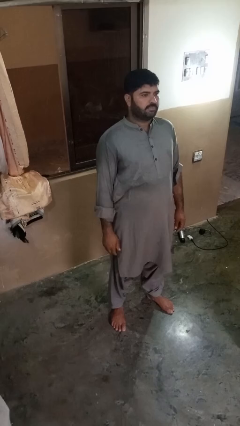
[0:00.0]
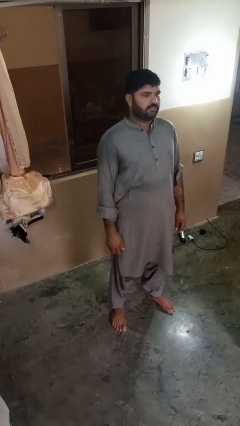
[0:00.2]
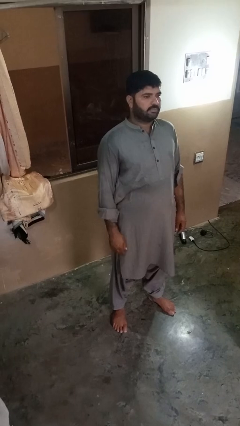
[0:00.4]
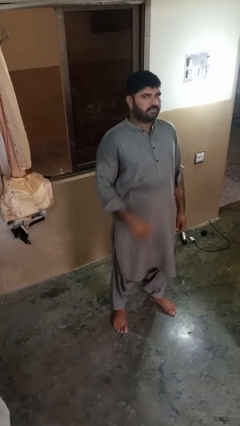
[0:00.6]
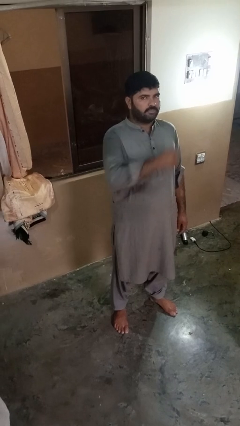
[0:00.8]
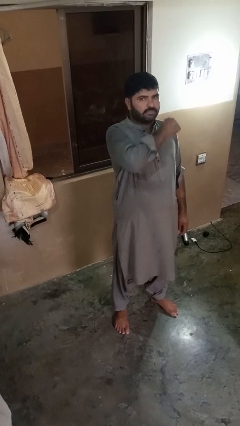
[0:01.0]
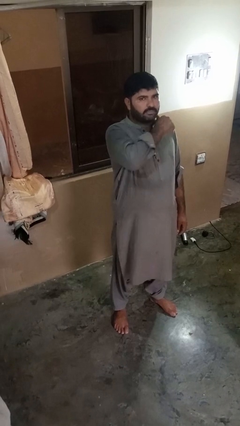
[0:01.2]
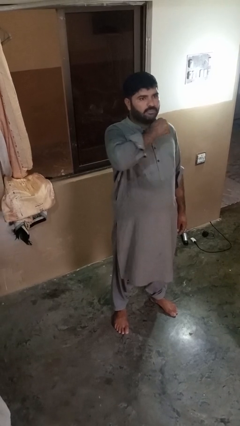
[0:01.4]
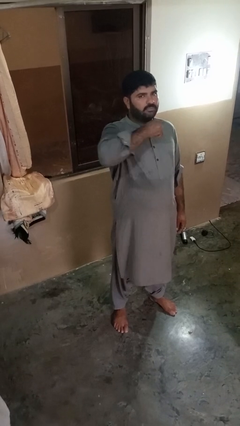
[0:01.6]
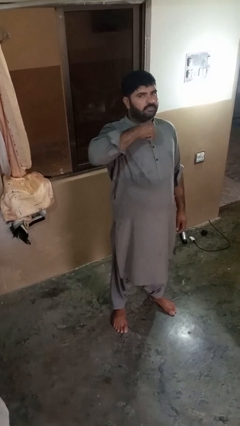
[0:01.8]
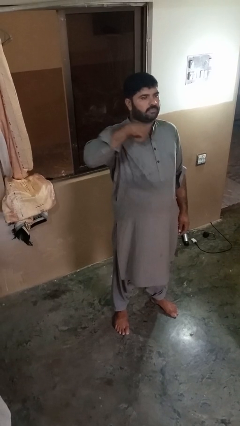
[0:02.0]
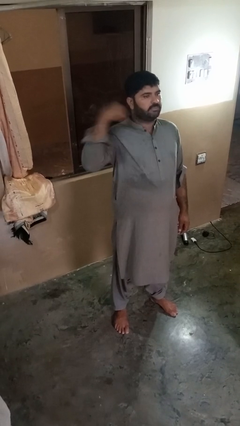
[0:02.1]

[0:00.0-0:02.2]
person gestures cut

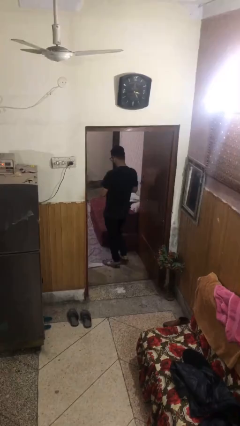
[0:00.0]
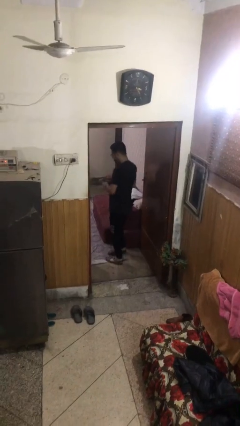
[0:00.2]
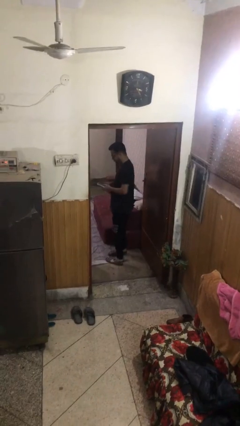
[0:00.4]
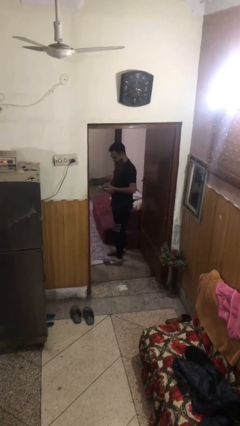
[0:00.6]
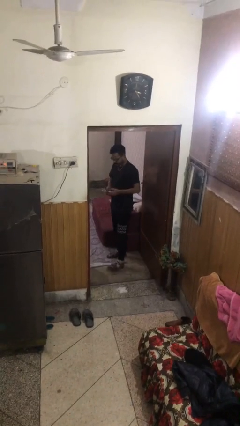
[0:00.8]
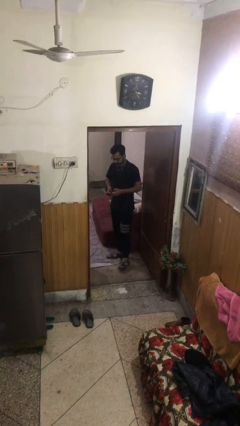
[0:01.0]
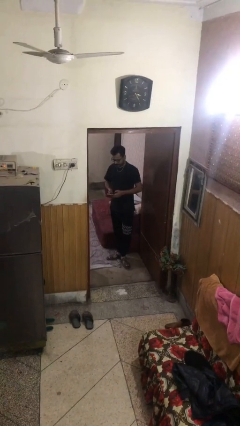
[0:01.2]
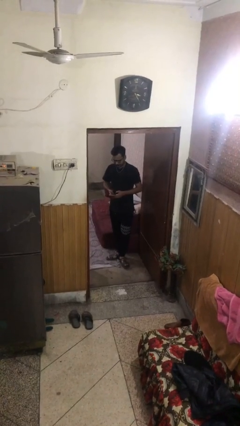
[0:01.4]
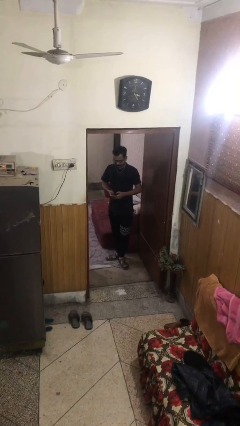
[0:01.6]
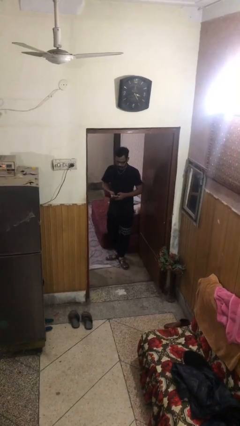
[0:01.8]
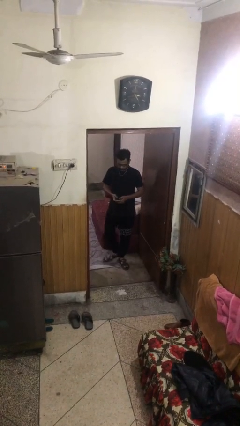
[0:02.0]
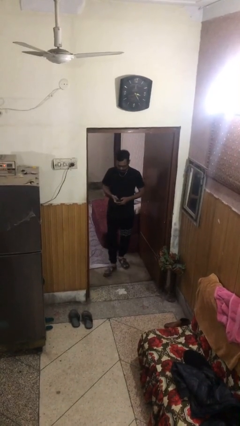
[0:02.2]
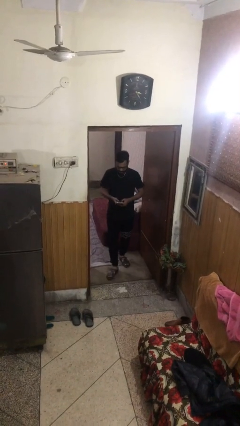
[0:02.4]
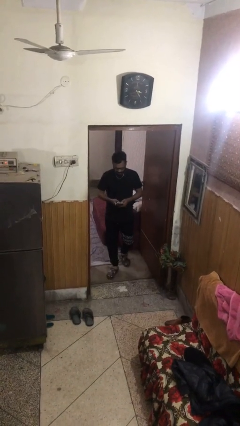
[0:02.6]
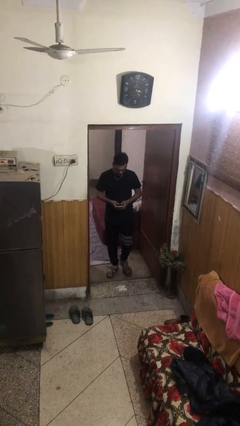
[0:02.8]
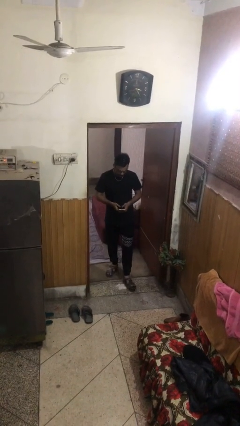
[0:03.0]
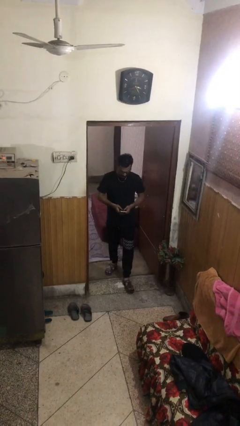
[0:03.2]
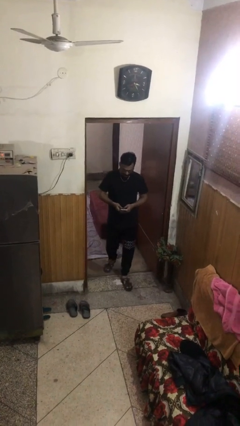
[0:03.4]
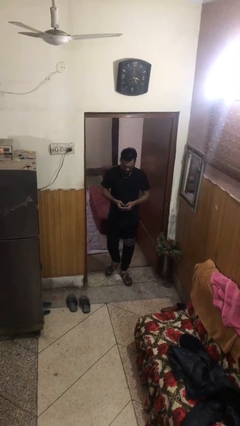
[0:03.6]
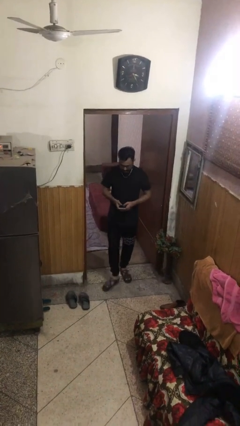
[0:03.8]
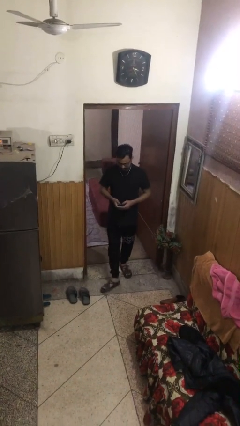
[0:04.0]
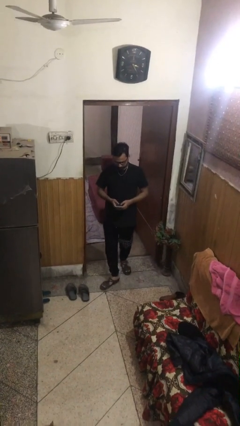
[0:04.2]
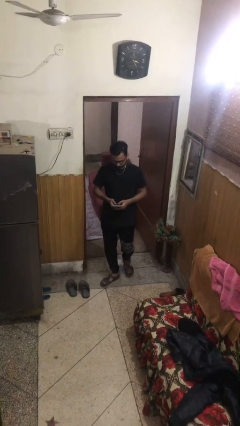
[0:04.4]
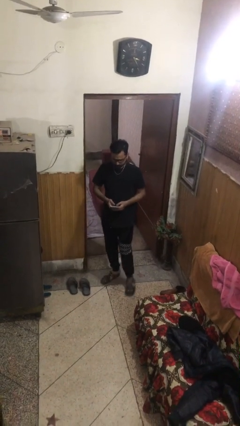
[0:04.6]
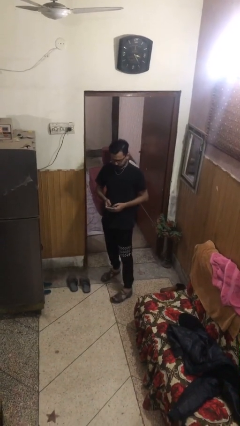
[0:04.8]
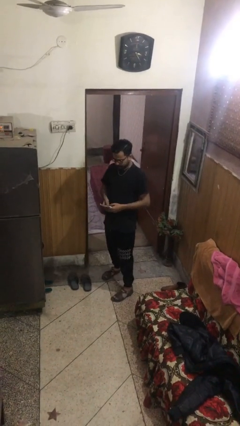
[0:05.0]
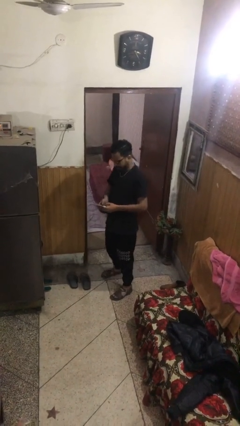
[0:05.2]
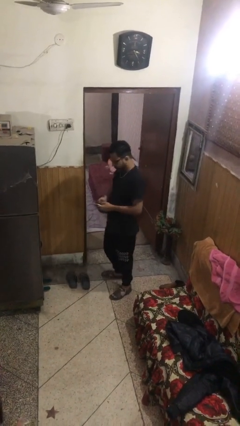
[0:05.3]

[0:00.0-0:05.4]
person enters scene through structure

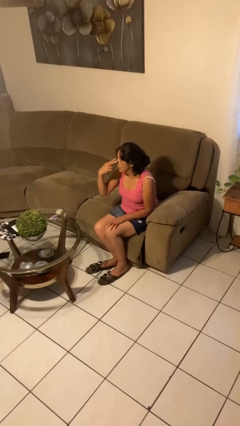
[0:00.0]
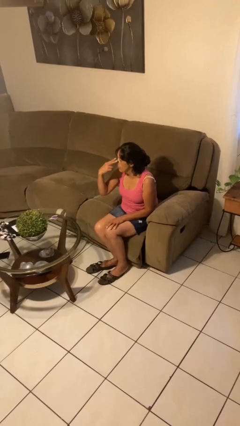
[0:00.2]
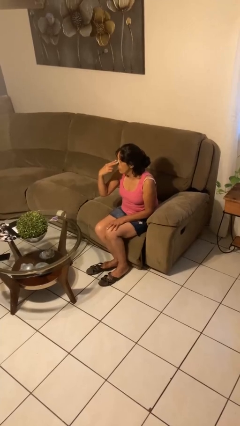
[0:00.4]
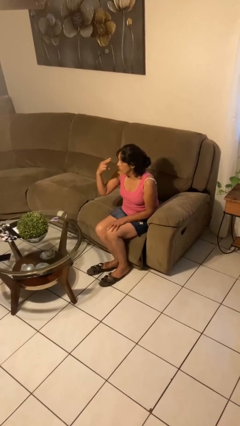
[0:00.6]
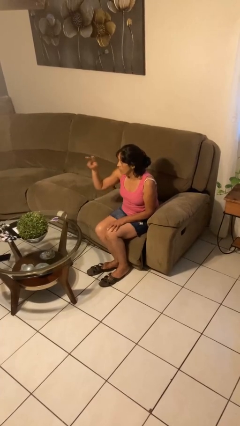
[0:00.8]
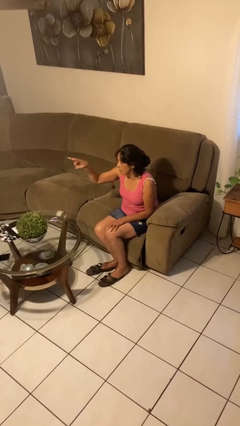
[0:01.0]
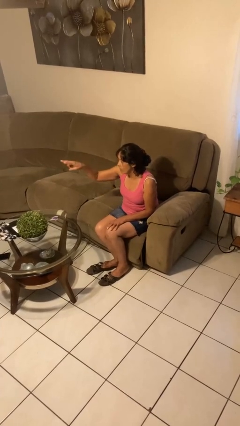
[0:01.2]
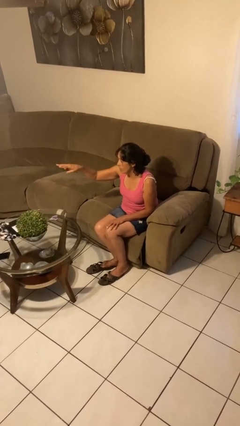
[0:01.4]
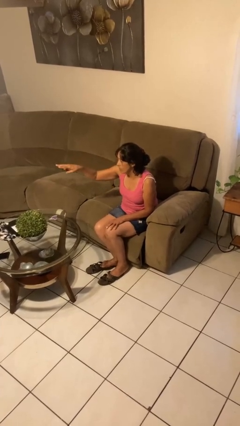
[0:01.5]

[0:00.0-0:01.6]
person gestures watch closely

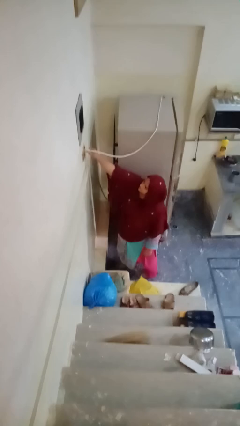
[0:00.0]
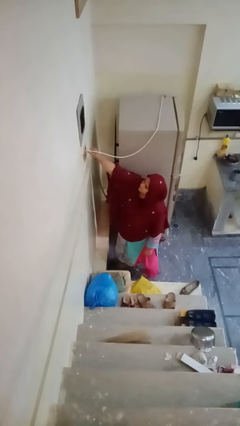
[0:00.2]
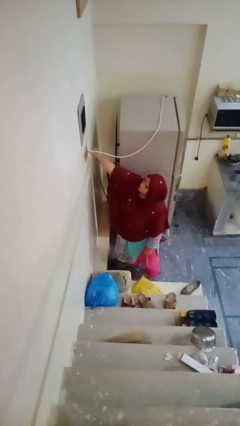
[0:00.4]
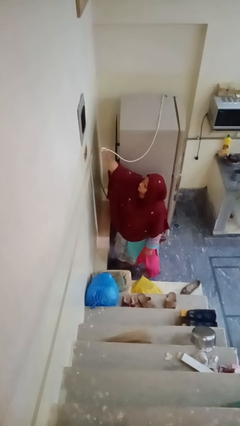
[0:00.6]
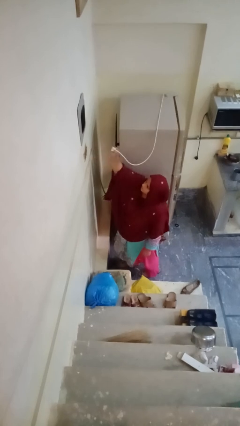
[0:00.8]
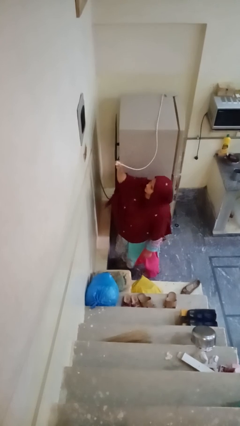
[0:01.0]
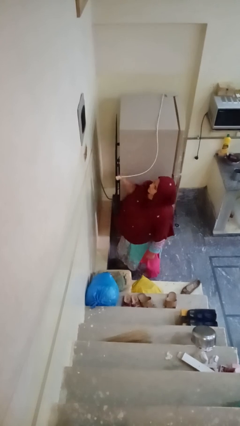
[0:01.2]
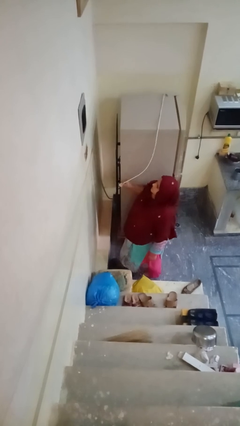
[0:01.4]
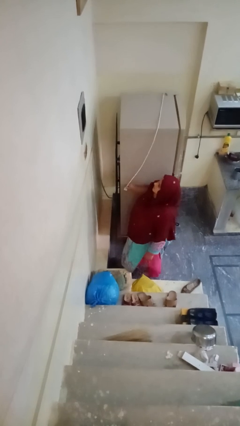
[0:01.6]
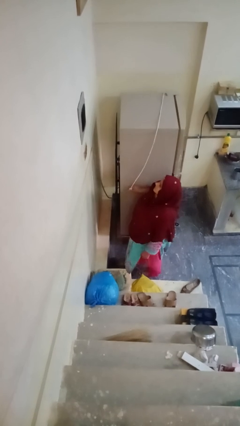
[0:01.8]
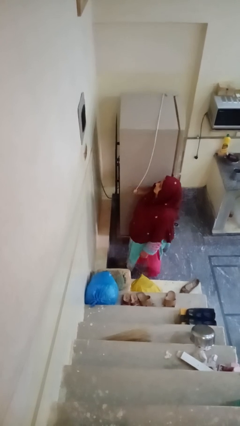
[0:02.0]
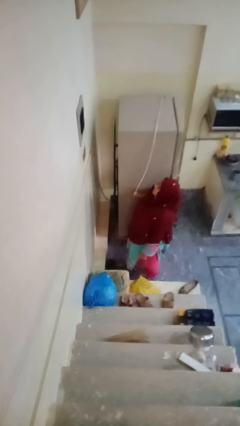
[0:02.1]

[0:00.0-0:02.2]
person unplugs from electrical socket

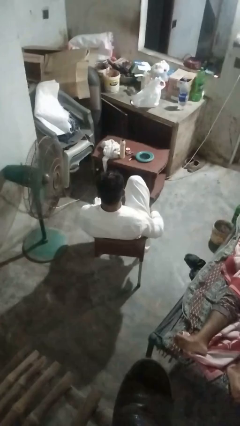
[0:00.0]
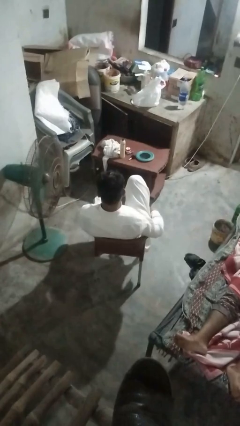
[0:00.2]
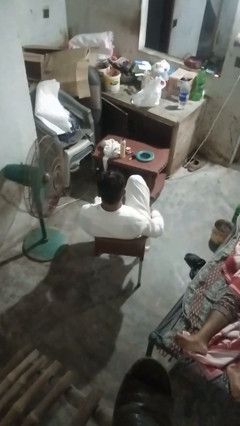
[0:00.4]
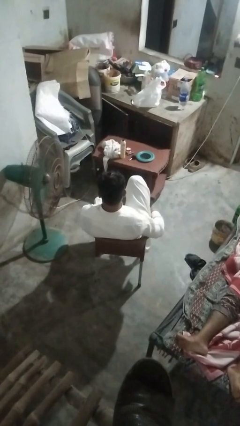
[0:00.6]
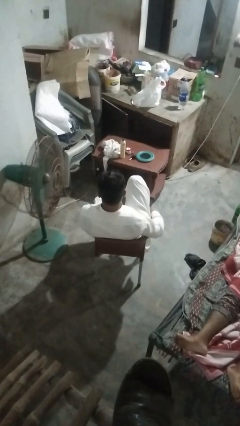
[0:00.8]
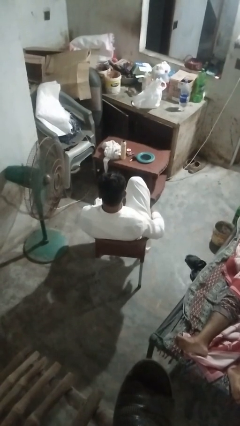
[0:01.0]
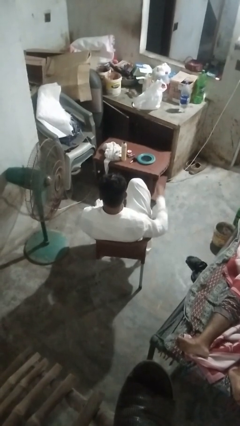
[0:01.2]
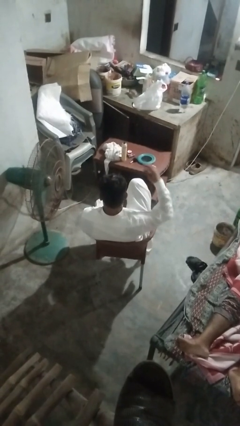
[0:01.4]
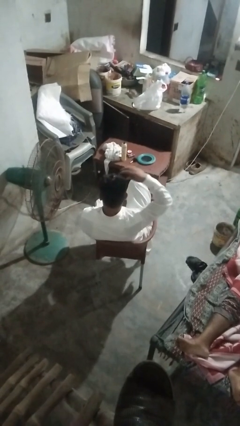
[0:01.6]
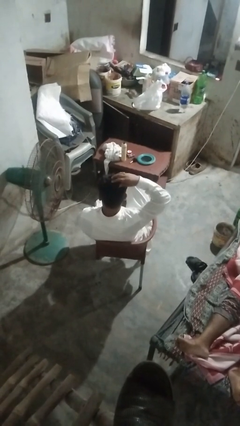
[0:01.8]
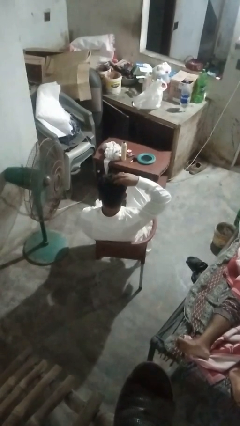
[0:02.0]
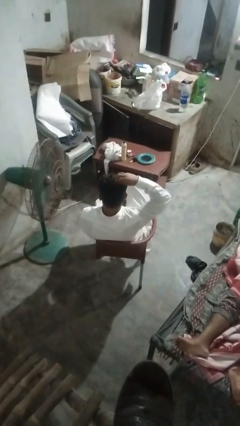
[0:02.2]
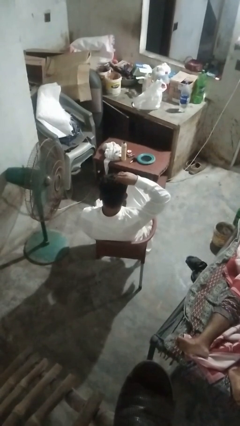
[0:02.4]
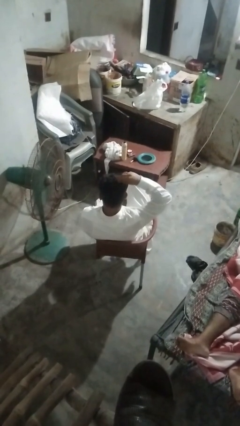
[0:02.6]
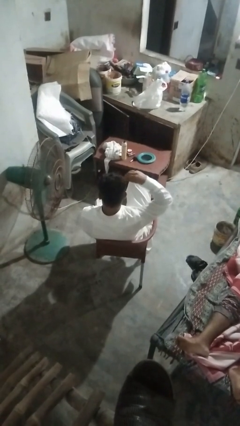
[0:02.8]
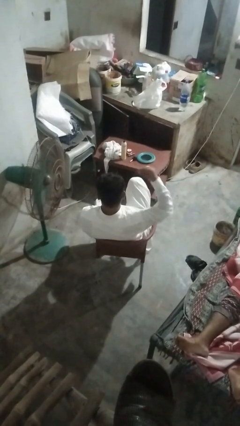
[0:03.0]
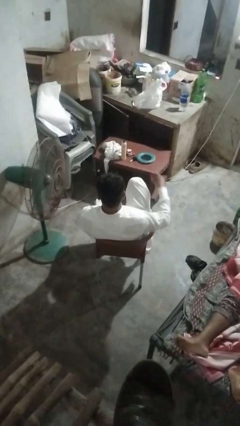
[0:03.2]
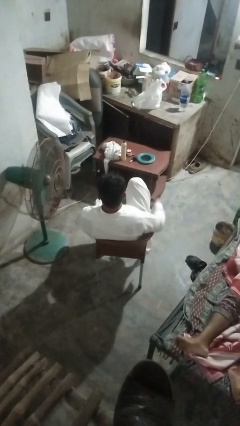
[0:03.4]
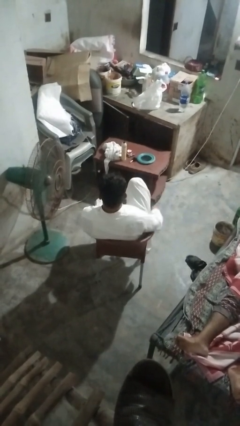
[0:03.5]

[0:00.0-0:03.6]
person takes off hairtie

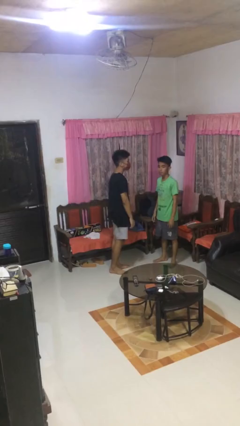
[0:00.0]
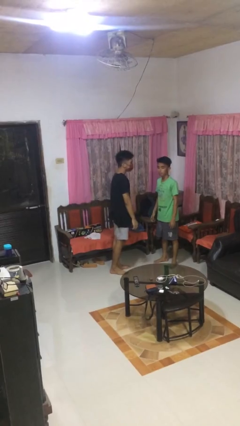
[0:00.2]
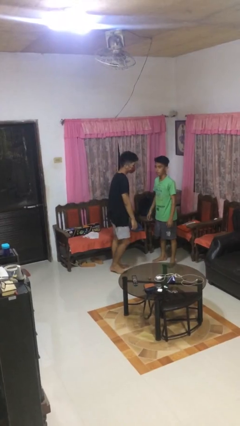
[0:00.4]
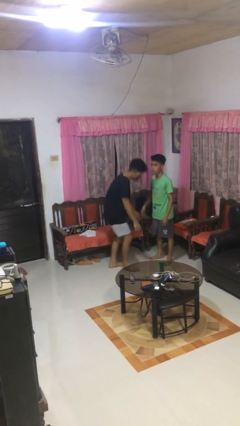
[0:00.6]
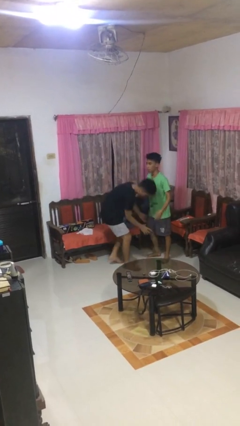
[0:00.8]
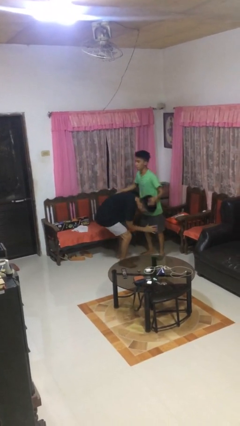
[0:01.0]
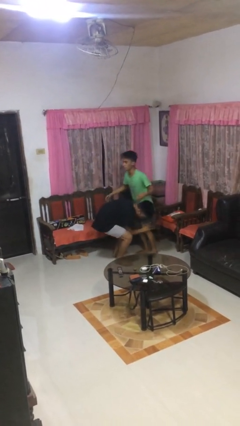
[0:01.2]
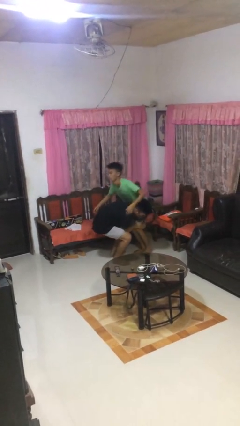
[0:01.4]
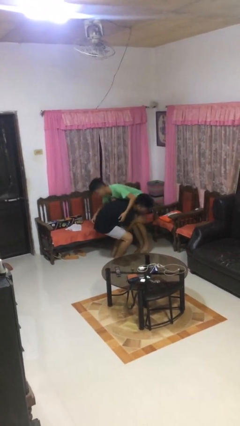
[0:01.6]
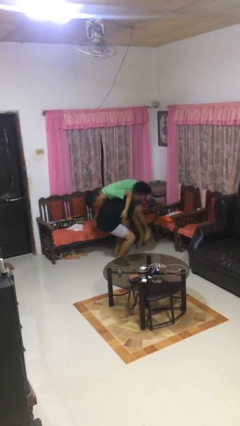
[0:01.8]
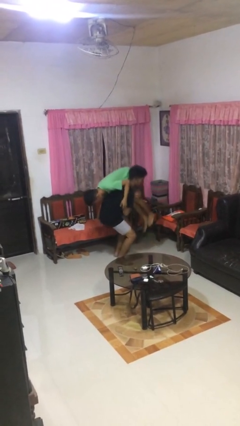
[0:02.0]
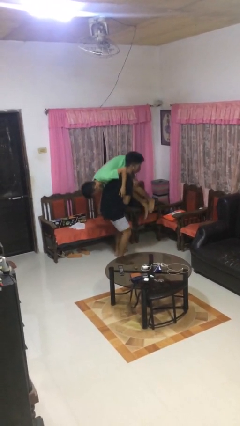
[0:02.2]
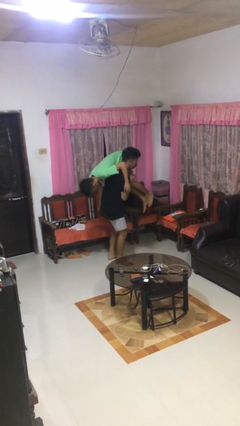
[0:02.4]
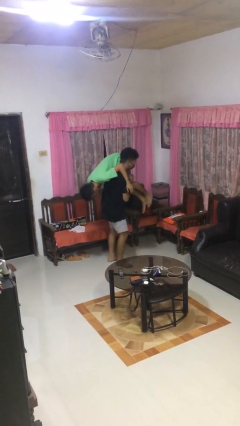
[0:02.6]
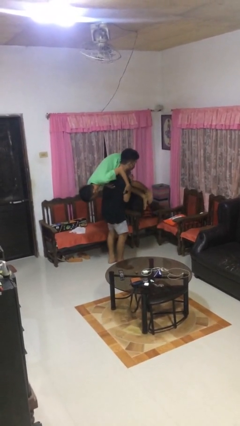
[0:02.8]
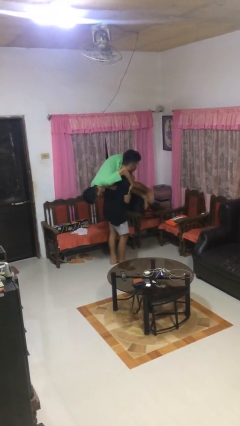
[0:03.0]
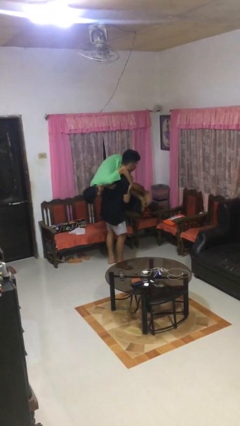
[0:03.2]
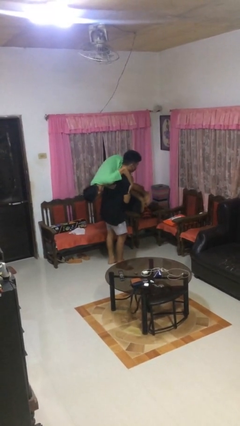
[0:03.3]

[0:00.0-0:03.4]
person carries person over shoulder
